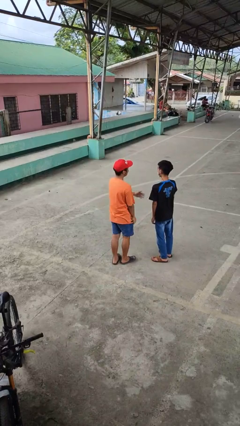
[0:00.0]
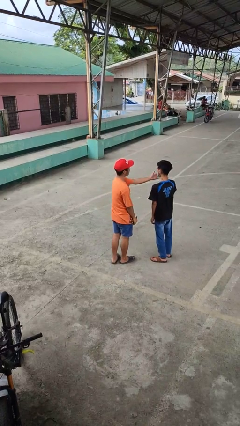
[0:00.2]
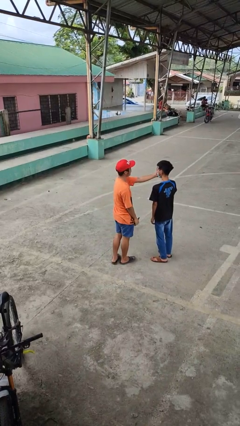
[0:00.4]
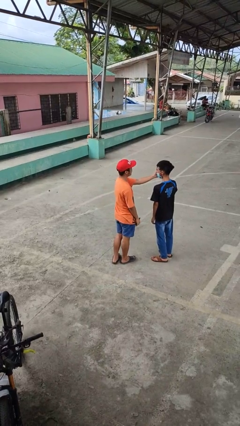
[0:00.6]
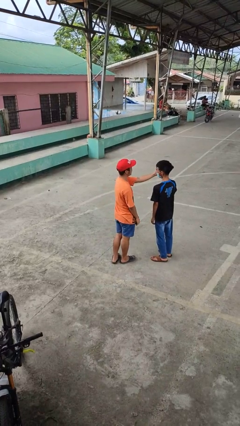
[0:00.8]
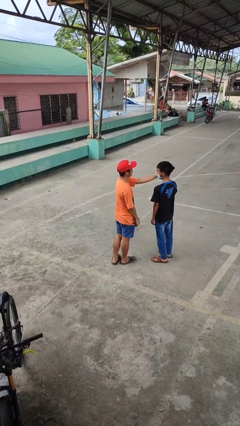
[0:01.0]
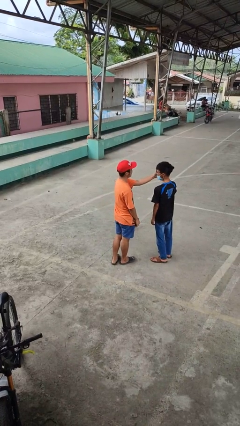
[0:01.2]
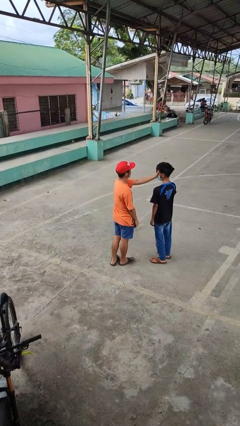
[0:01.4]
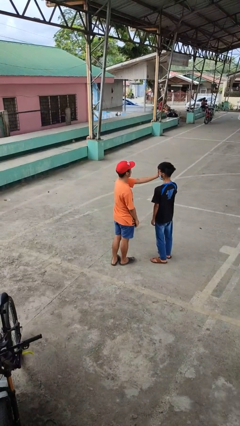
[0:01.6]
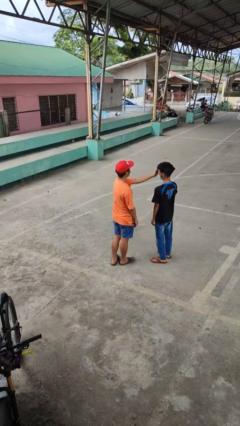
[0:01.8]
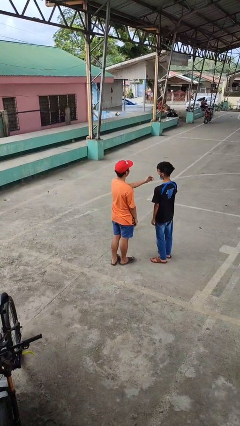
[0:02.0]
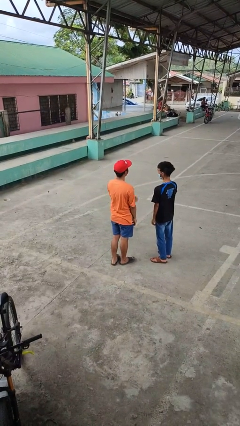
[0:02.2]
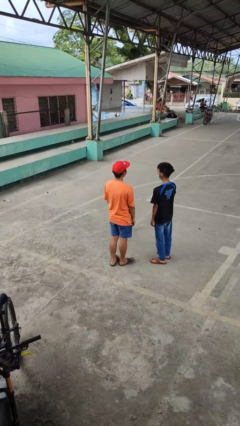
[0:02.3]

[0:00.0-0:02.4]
person touches face of person

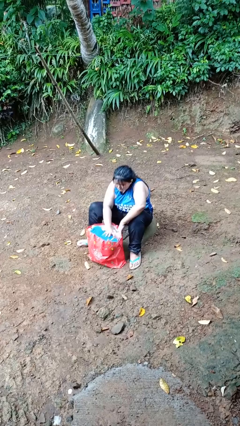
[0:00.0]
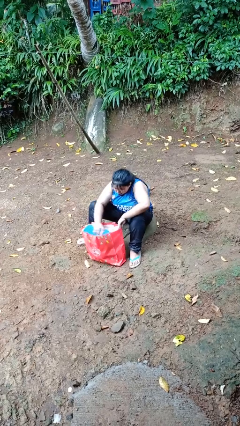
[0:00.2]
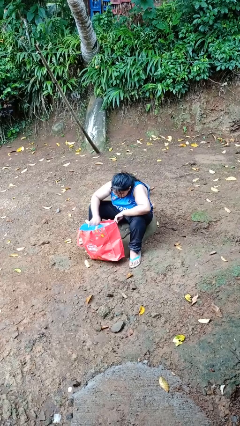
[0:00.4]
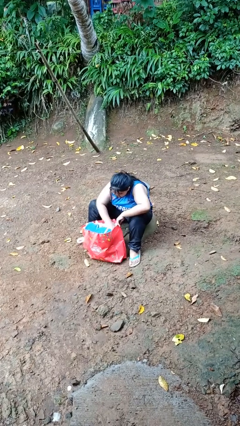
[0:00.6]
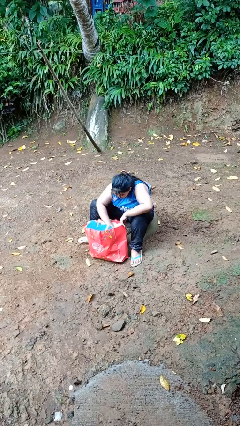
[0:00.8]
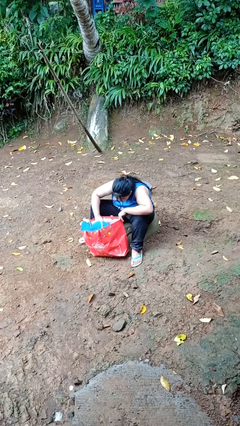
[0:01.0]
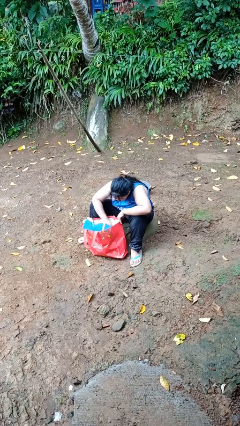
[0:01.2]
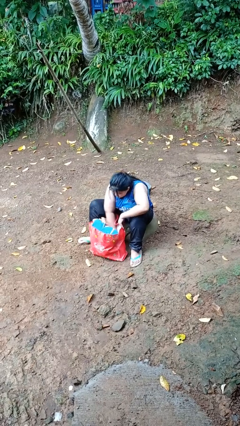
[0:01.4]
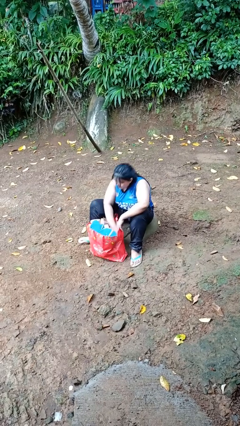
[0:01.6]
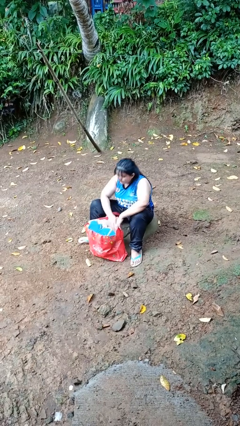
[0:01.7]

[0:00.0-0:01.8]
person searches in bag

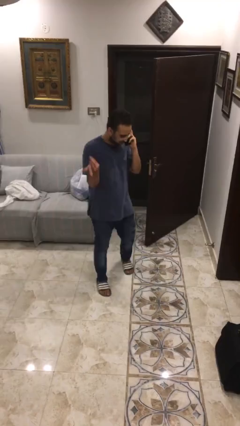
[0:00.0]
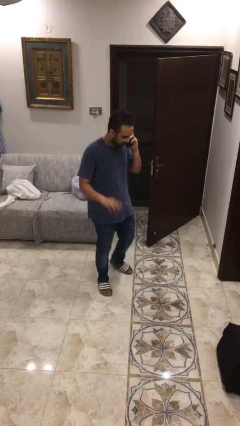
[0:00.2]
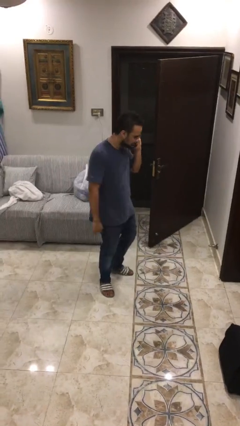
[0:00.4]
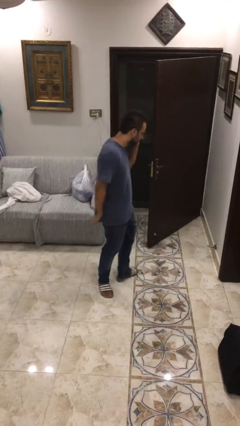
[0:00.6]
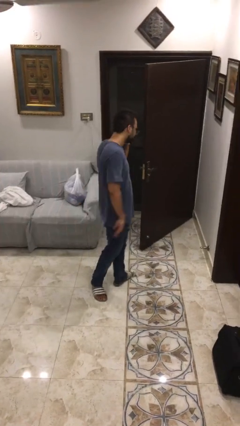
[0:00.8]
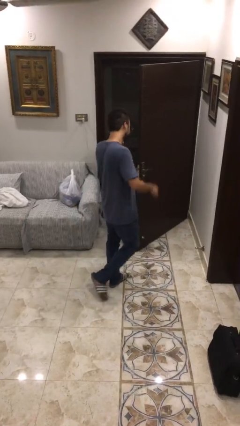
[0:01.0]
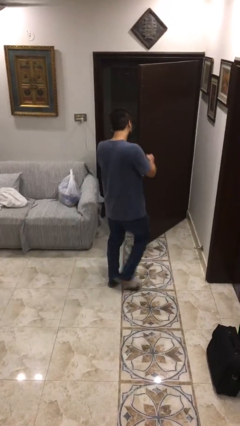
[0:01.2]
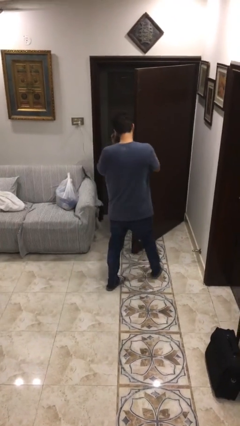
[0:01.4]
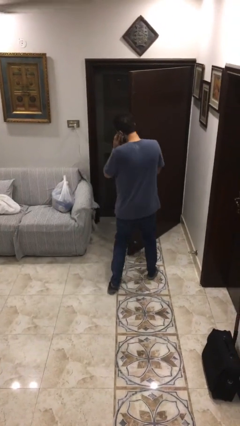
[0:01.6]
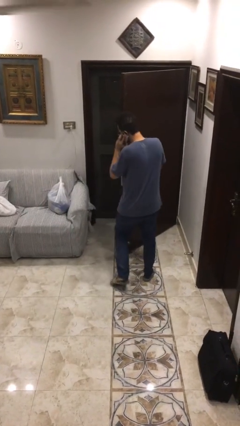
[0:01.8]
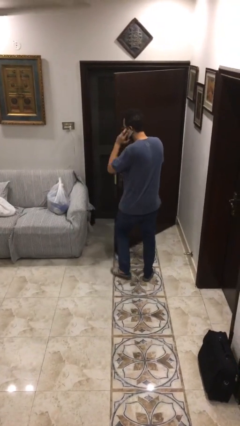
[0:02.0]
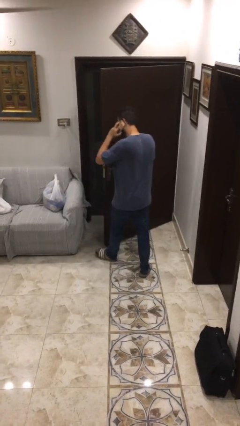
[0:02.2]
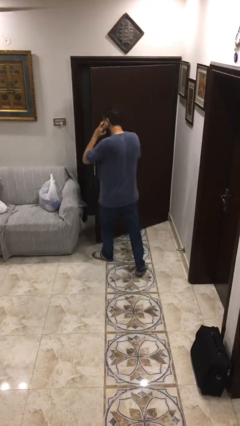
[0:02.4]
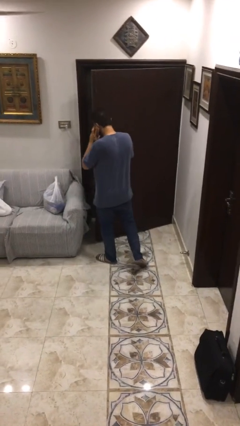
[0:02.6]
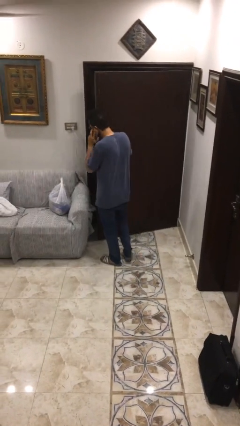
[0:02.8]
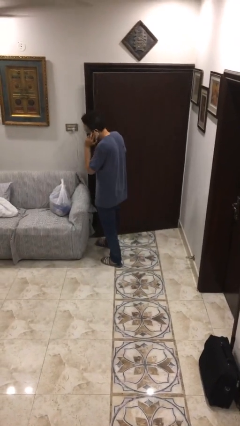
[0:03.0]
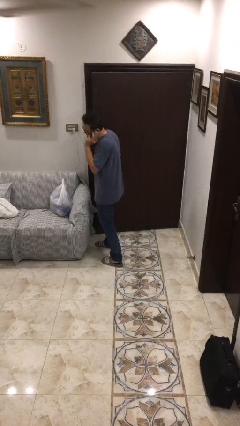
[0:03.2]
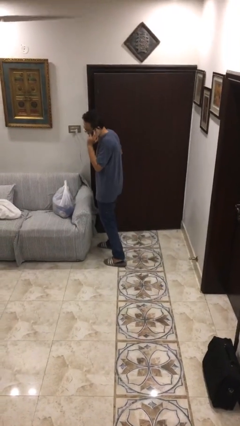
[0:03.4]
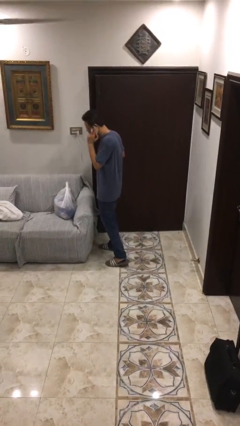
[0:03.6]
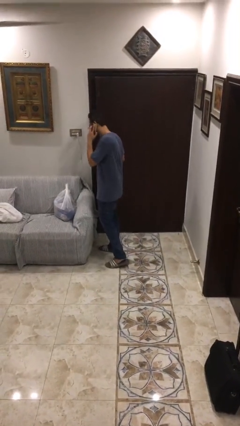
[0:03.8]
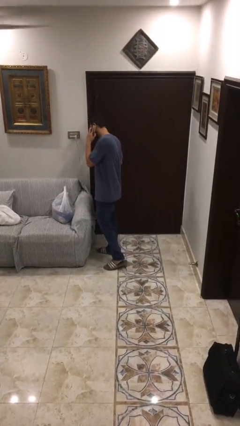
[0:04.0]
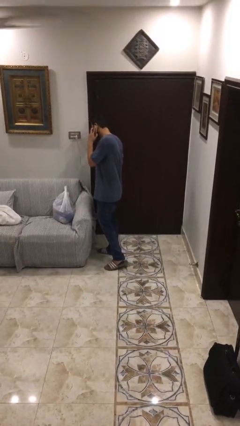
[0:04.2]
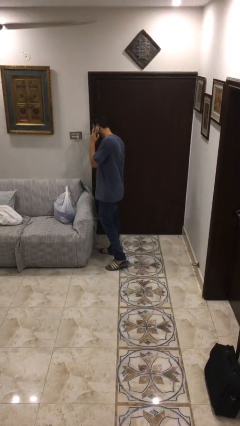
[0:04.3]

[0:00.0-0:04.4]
person closes facility door

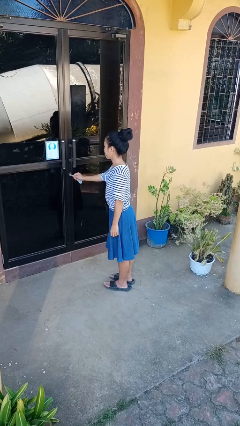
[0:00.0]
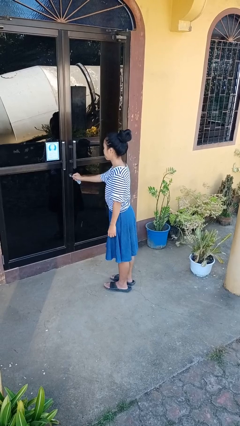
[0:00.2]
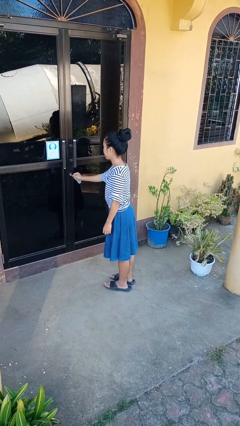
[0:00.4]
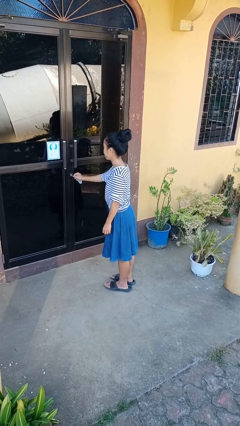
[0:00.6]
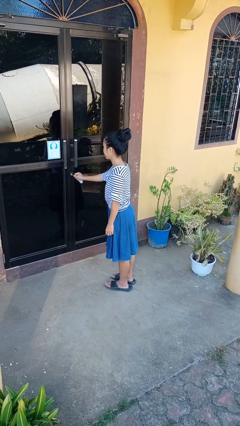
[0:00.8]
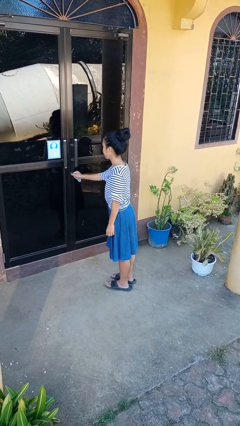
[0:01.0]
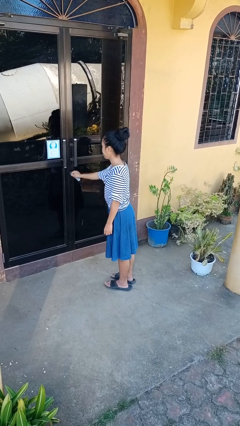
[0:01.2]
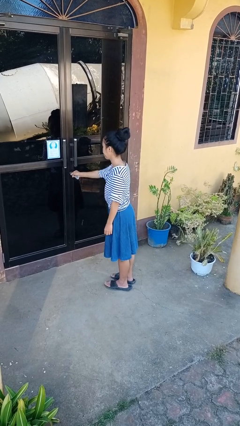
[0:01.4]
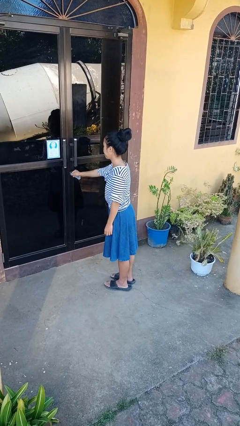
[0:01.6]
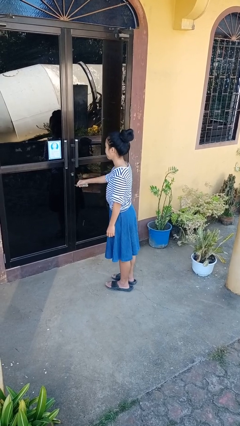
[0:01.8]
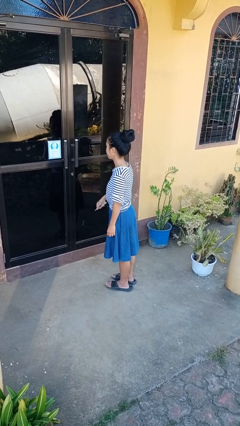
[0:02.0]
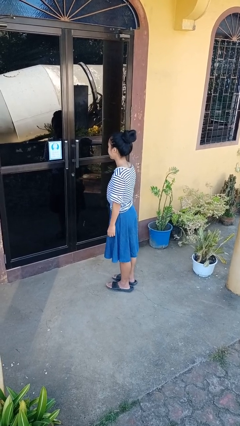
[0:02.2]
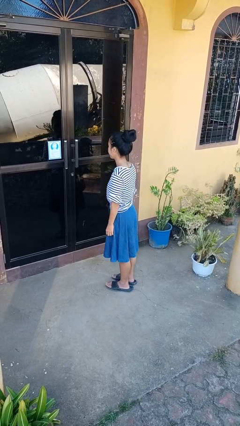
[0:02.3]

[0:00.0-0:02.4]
person unlocks door with keys

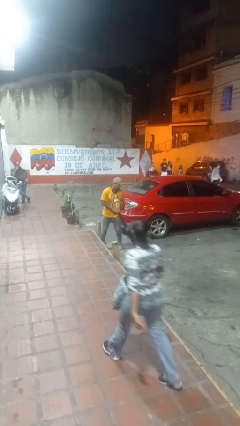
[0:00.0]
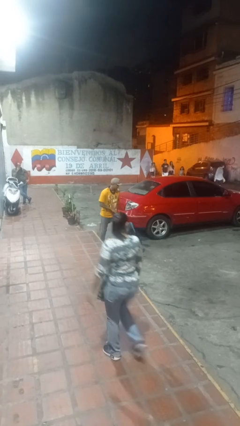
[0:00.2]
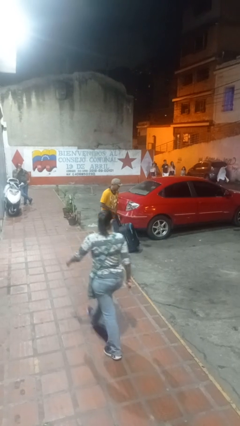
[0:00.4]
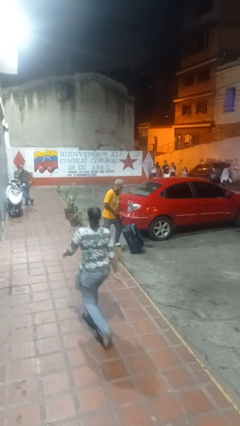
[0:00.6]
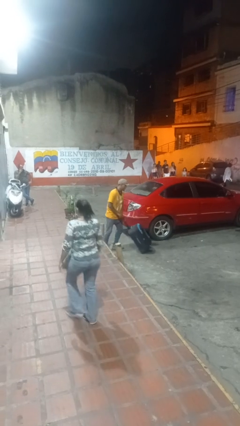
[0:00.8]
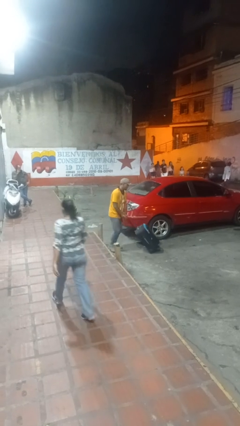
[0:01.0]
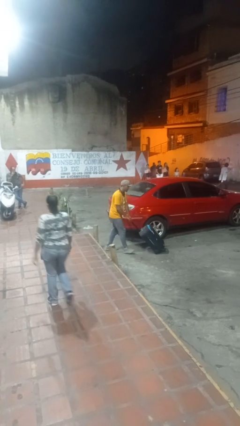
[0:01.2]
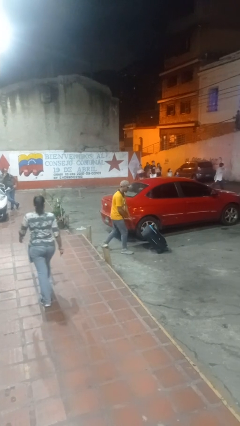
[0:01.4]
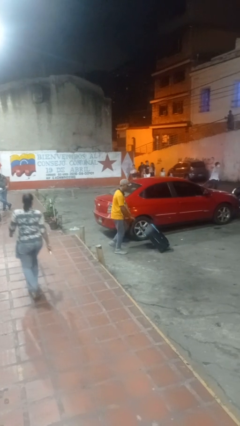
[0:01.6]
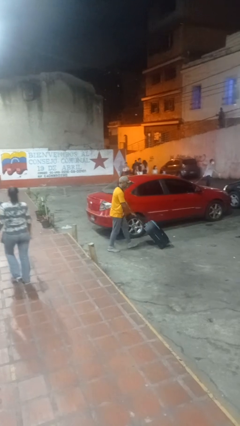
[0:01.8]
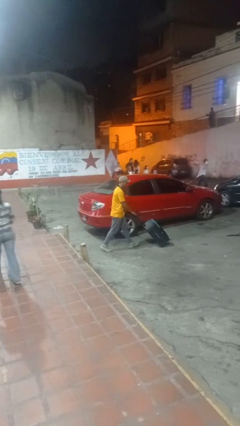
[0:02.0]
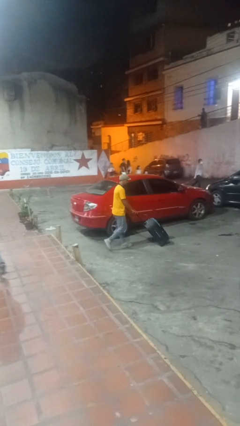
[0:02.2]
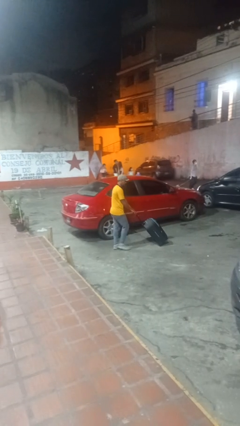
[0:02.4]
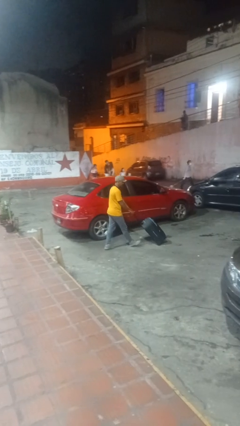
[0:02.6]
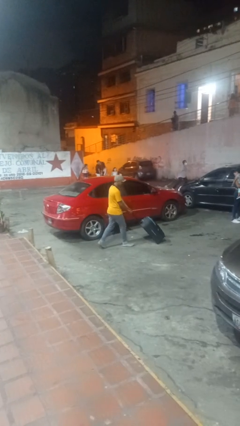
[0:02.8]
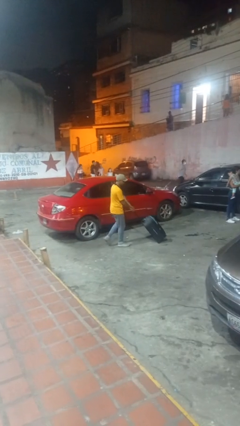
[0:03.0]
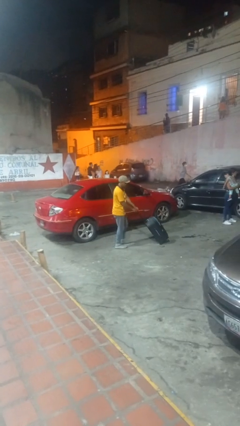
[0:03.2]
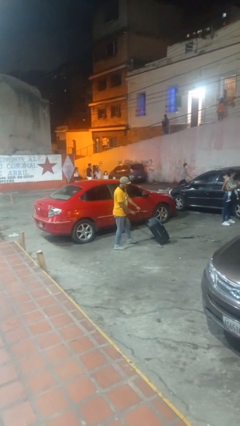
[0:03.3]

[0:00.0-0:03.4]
person pushes wheeled cart

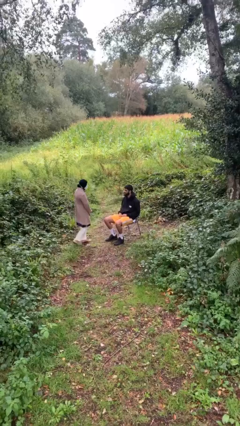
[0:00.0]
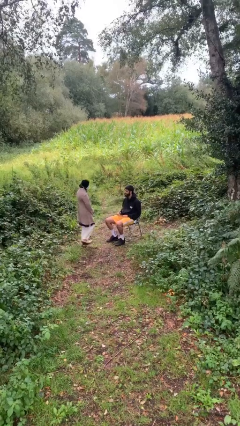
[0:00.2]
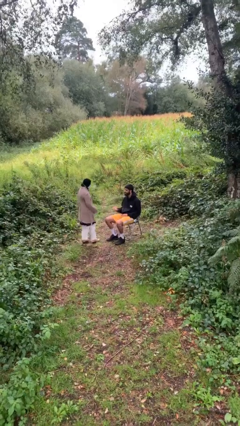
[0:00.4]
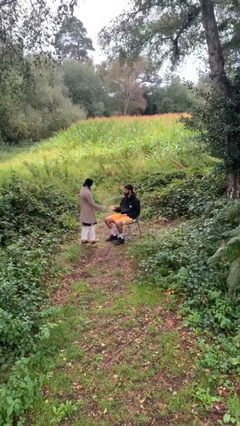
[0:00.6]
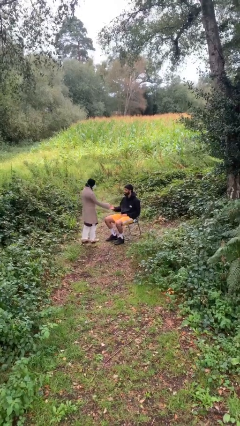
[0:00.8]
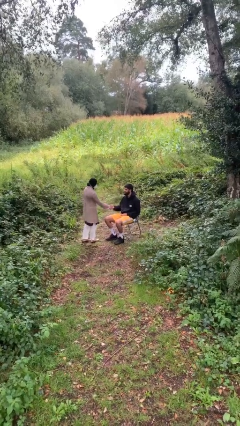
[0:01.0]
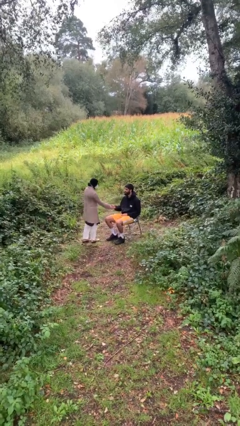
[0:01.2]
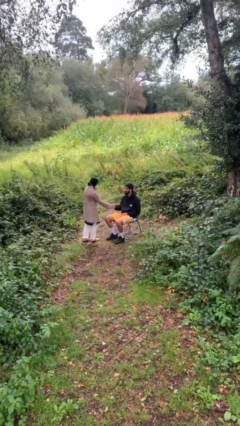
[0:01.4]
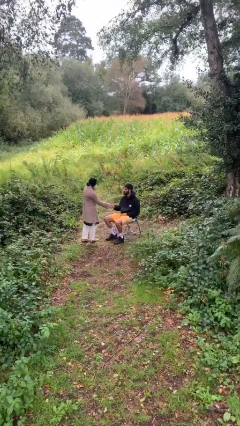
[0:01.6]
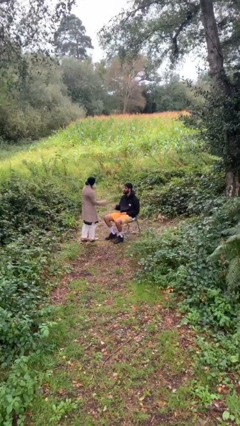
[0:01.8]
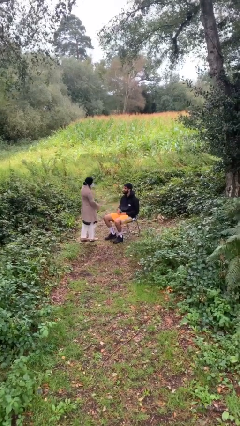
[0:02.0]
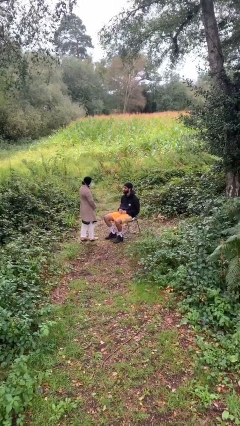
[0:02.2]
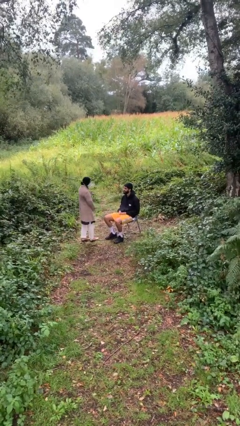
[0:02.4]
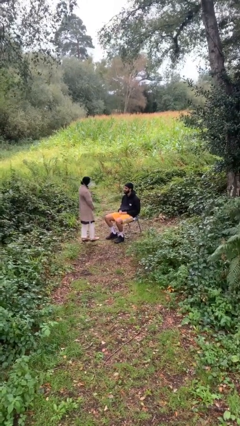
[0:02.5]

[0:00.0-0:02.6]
person shakes hand

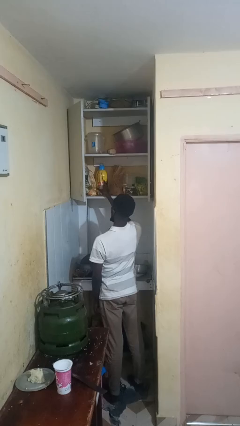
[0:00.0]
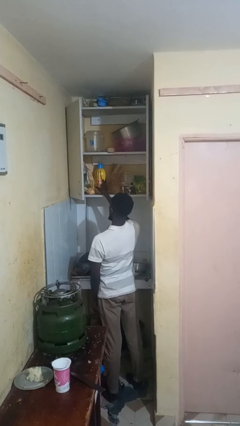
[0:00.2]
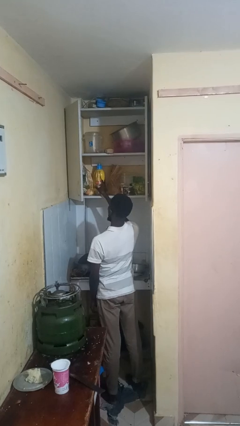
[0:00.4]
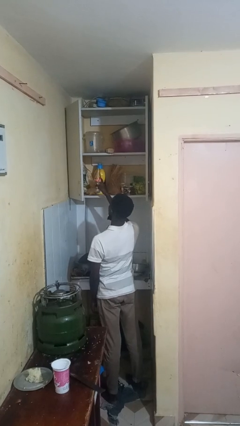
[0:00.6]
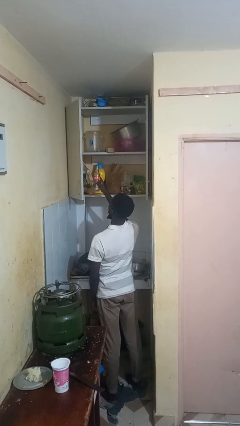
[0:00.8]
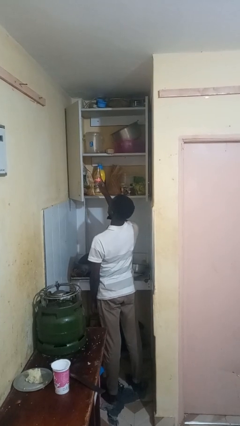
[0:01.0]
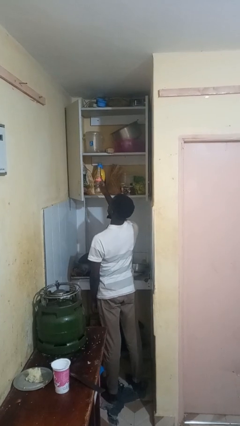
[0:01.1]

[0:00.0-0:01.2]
person picks up object from cabinet
